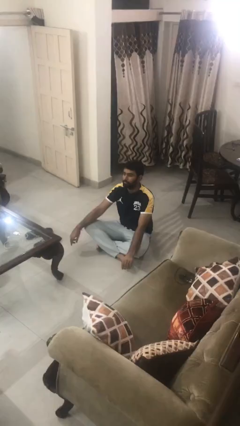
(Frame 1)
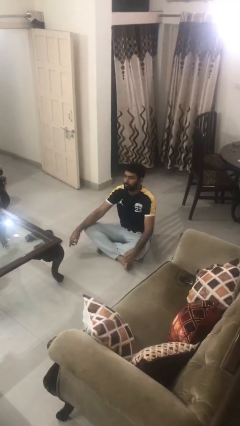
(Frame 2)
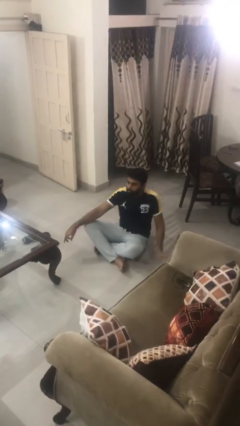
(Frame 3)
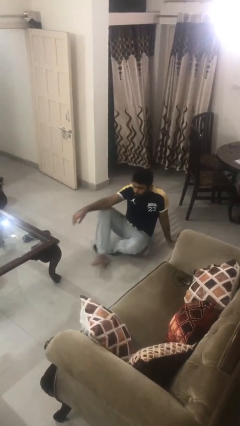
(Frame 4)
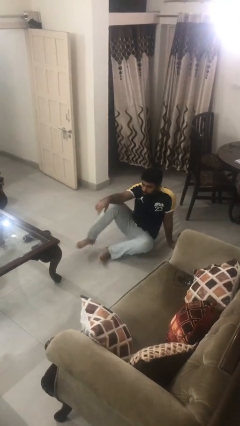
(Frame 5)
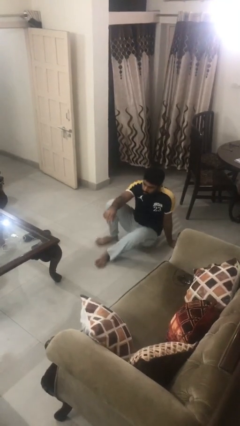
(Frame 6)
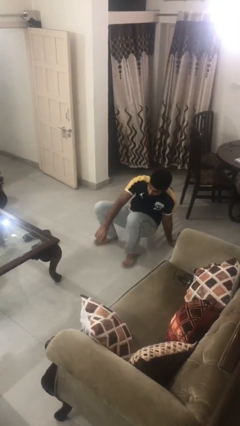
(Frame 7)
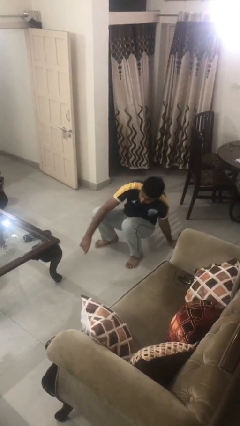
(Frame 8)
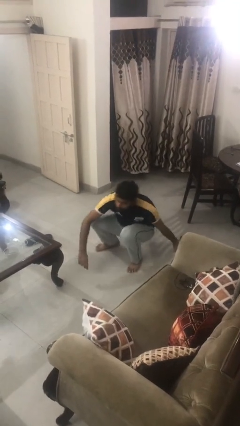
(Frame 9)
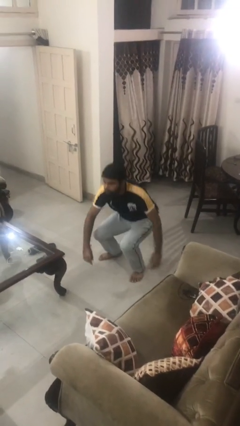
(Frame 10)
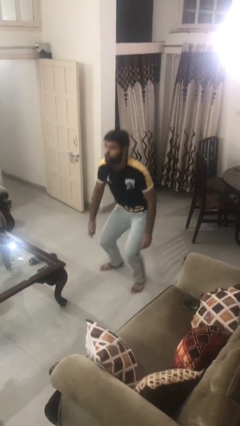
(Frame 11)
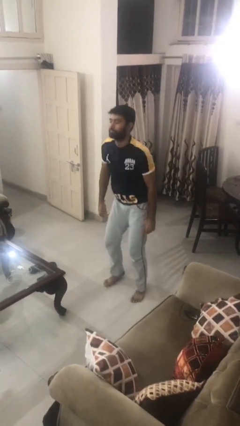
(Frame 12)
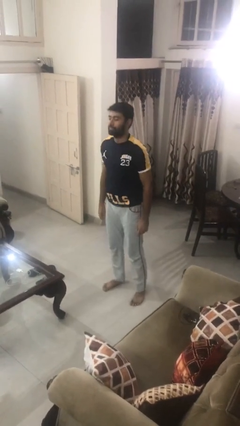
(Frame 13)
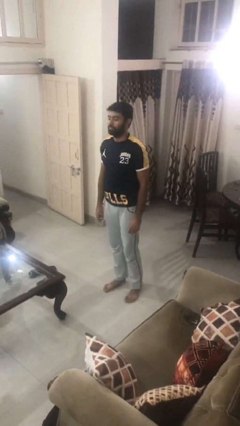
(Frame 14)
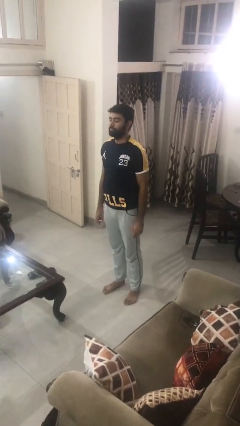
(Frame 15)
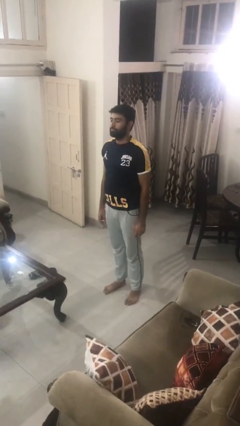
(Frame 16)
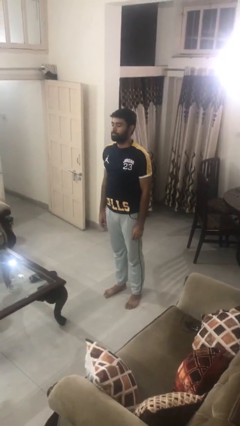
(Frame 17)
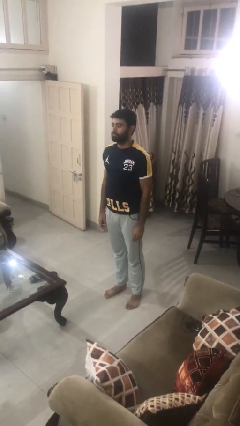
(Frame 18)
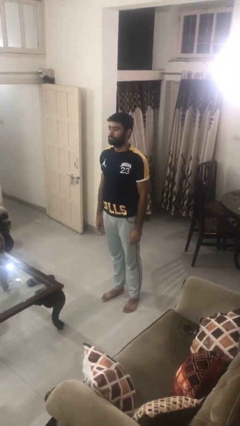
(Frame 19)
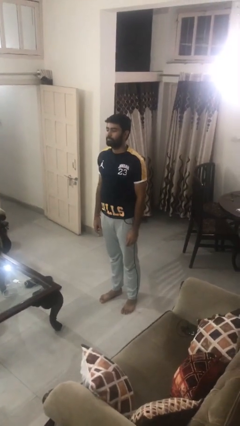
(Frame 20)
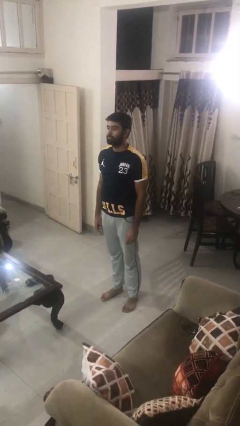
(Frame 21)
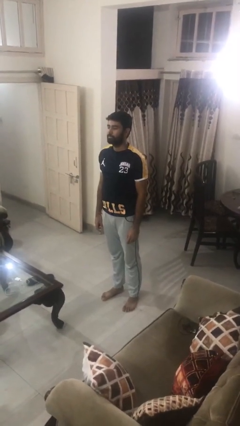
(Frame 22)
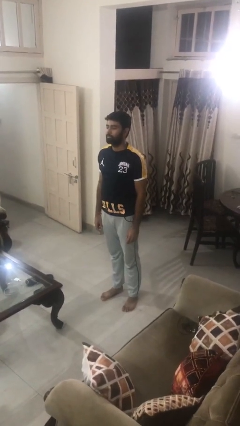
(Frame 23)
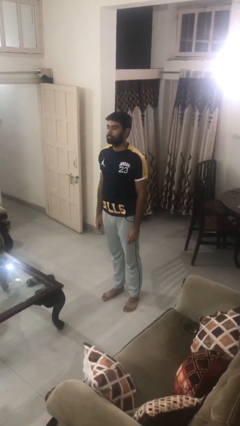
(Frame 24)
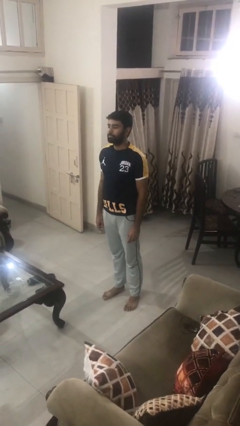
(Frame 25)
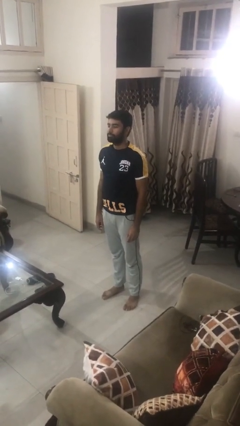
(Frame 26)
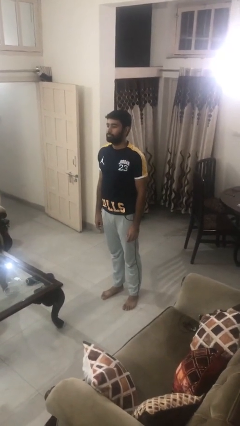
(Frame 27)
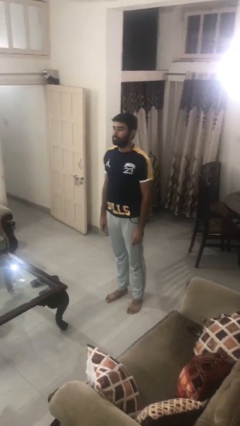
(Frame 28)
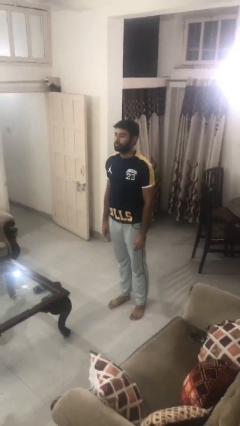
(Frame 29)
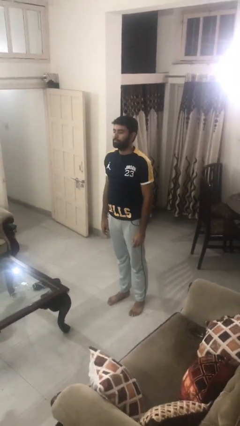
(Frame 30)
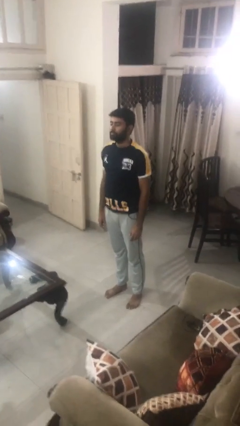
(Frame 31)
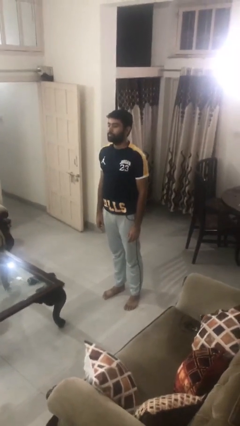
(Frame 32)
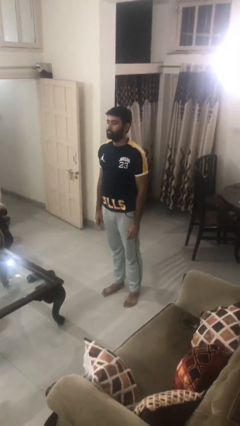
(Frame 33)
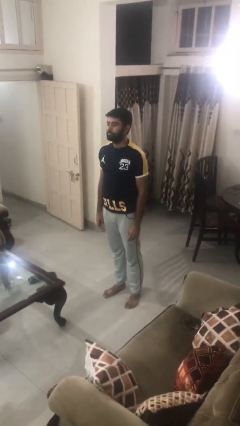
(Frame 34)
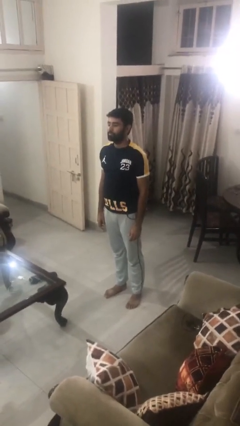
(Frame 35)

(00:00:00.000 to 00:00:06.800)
person stands up from floor

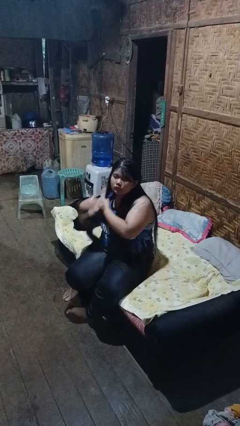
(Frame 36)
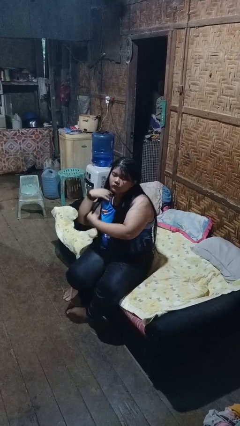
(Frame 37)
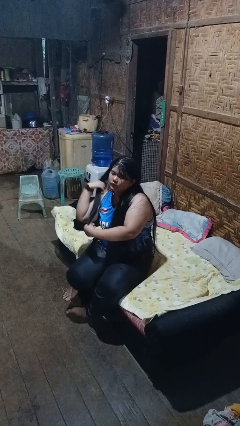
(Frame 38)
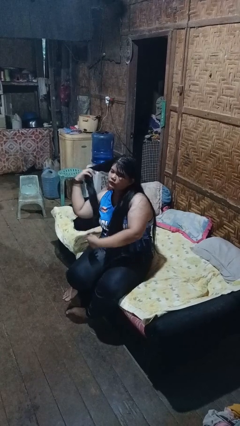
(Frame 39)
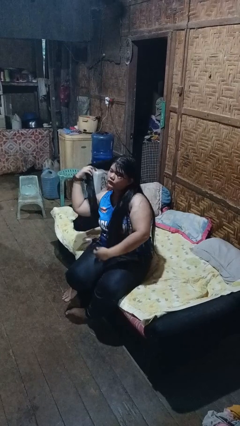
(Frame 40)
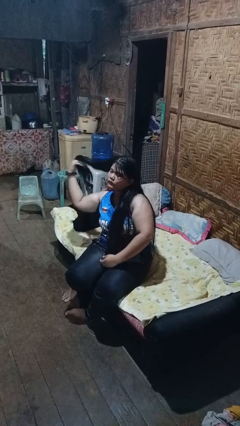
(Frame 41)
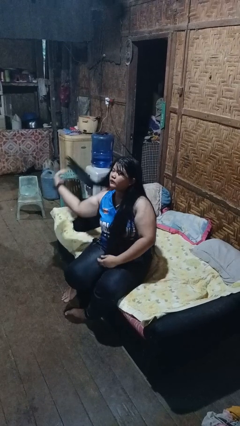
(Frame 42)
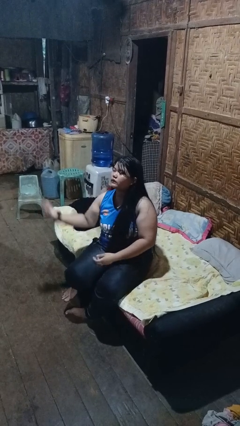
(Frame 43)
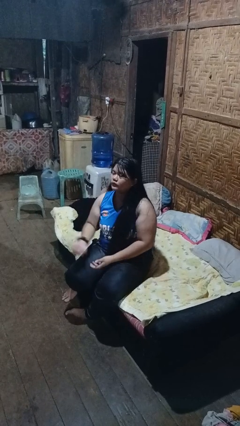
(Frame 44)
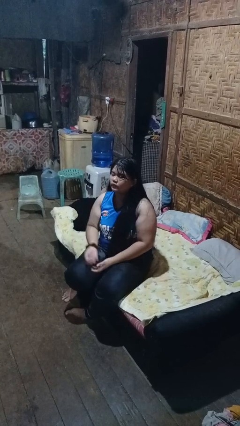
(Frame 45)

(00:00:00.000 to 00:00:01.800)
person strokes hair

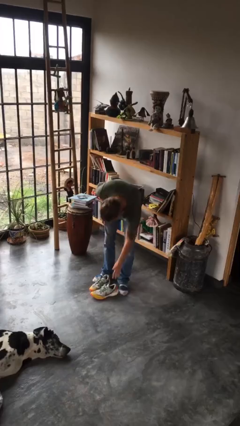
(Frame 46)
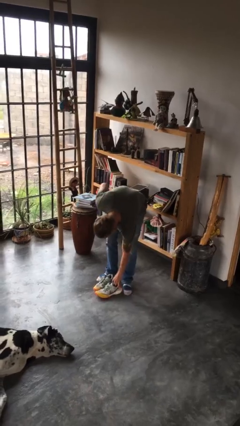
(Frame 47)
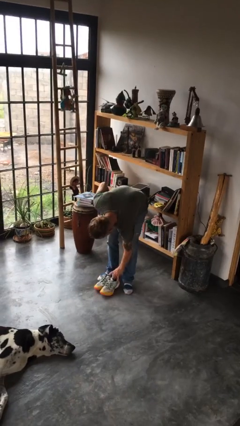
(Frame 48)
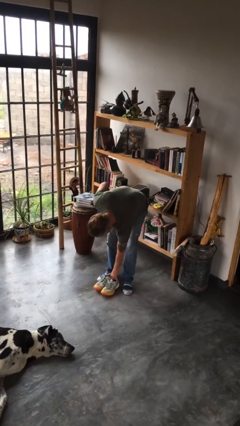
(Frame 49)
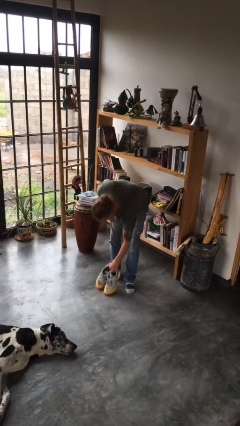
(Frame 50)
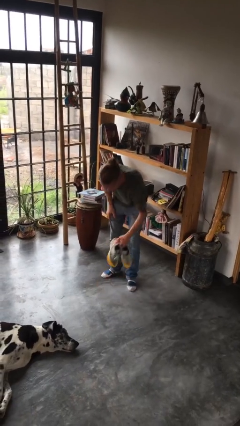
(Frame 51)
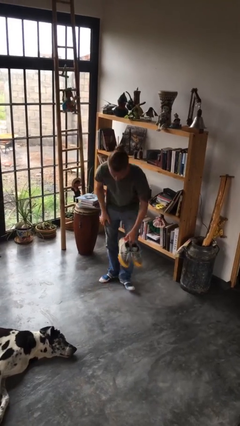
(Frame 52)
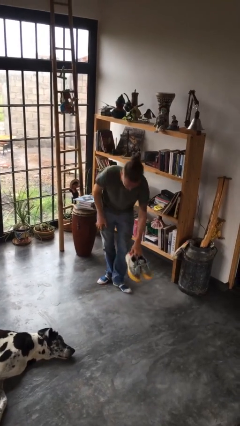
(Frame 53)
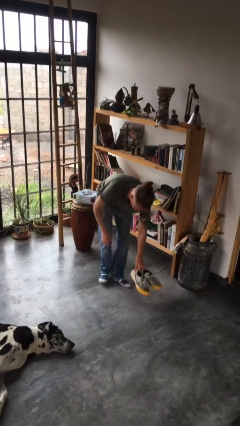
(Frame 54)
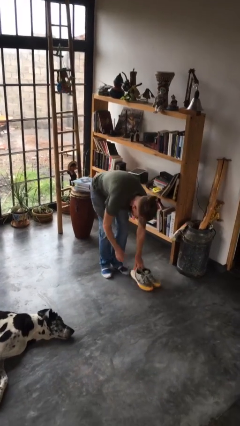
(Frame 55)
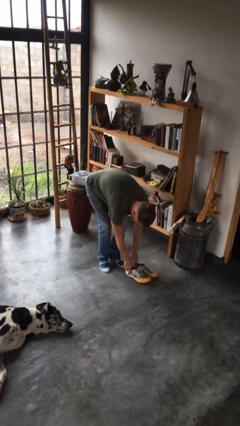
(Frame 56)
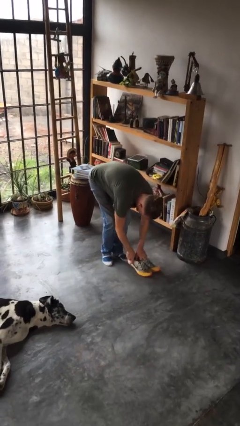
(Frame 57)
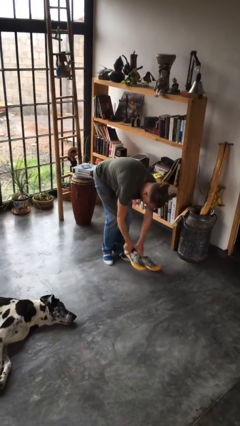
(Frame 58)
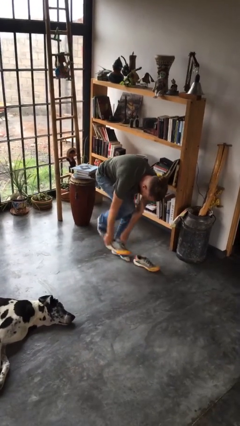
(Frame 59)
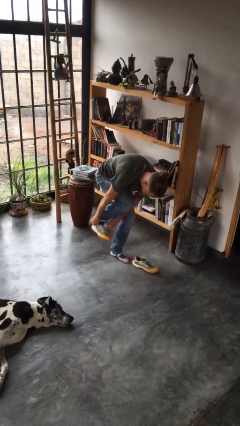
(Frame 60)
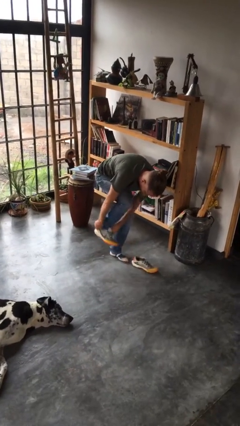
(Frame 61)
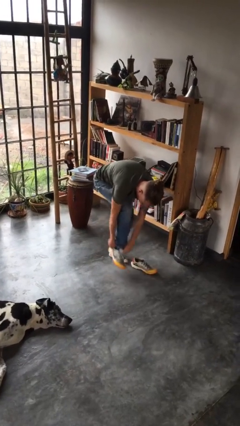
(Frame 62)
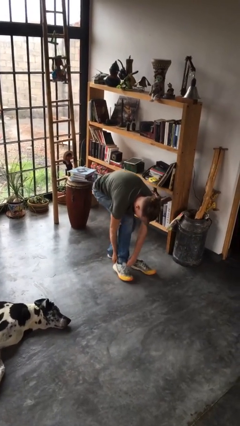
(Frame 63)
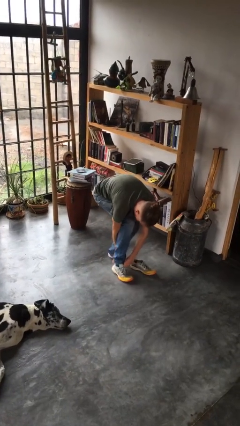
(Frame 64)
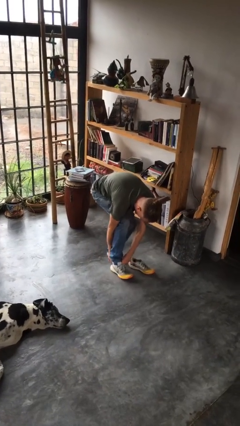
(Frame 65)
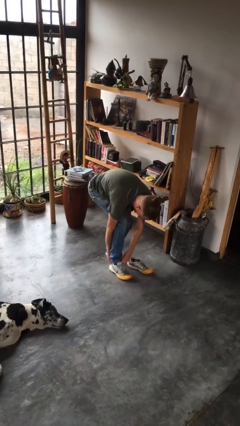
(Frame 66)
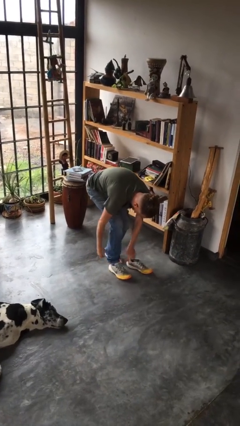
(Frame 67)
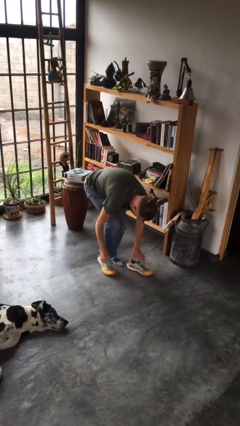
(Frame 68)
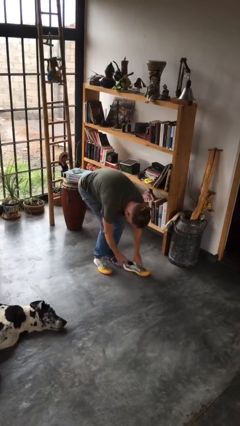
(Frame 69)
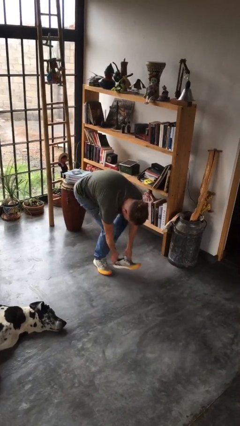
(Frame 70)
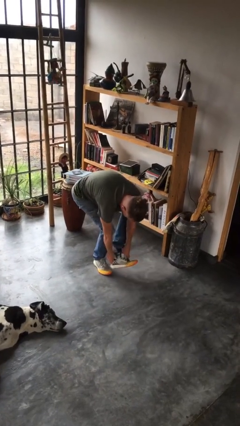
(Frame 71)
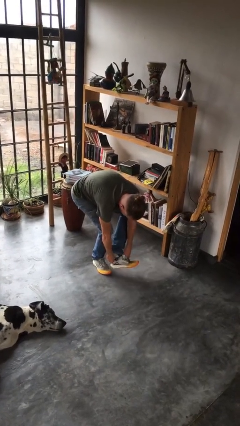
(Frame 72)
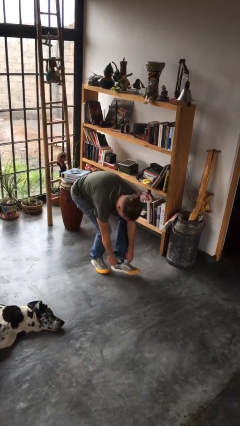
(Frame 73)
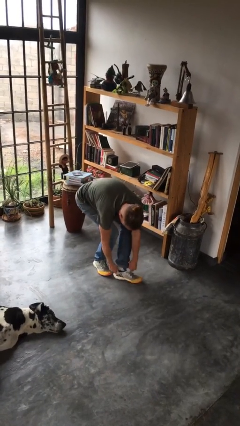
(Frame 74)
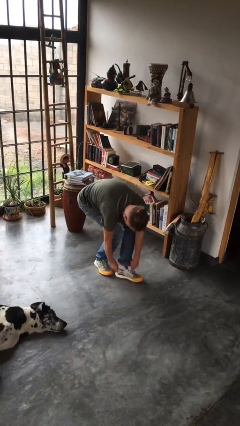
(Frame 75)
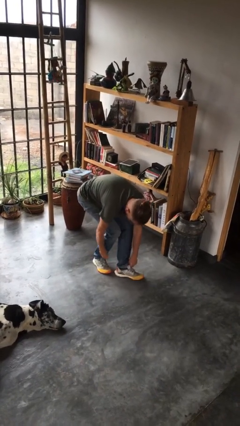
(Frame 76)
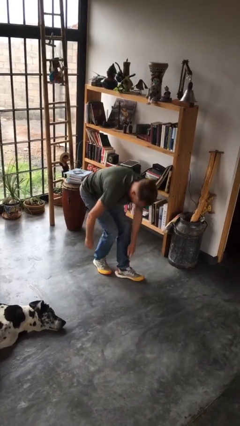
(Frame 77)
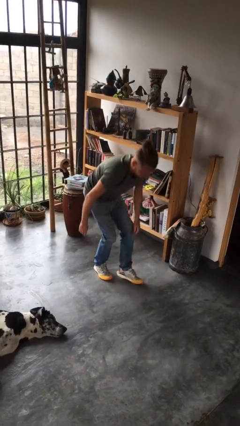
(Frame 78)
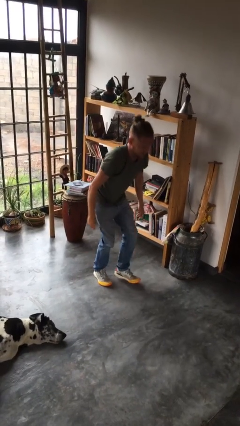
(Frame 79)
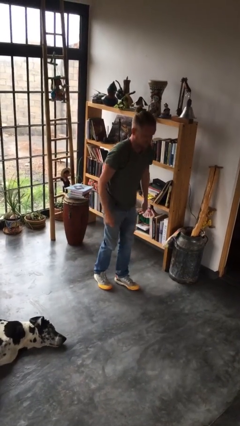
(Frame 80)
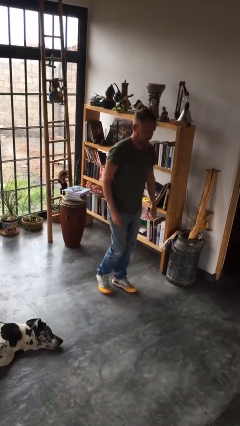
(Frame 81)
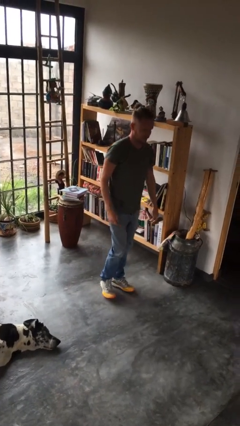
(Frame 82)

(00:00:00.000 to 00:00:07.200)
person puts on shoes

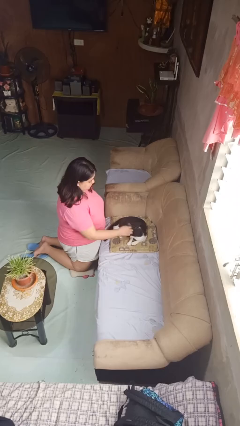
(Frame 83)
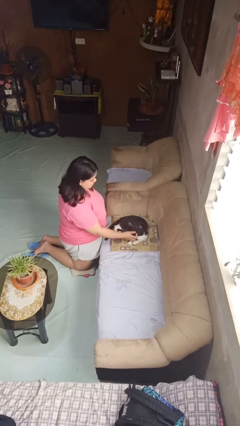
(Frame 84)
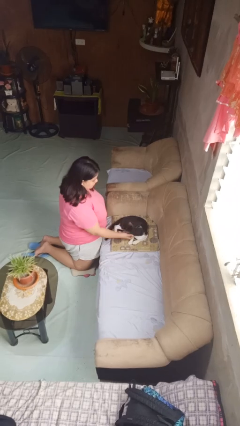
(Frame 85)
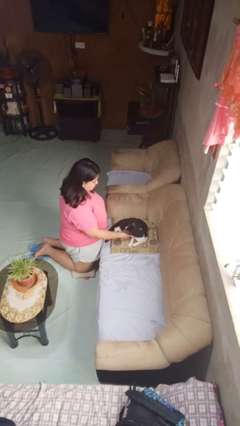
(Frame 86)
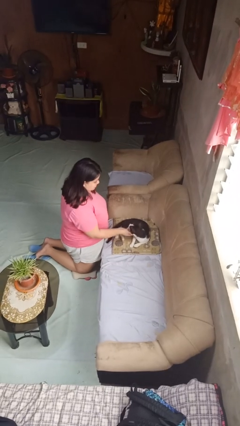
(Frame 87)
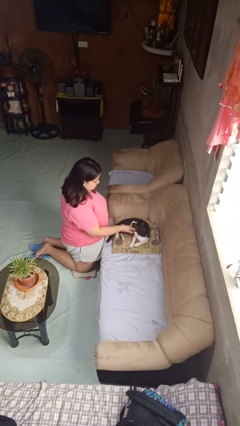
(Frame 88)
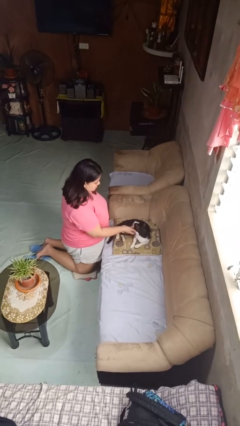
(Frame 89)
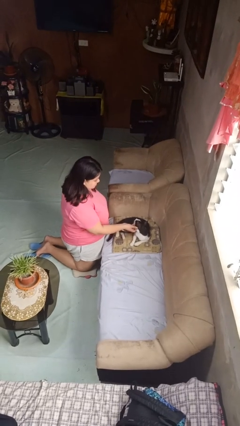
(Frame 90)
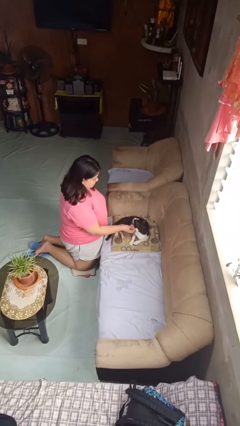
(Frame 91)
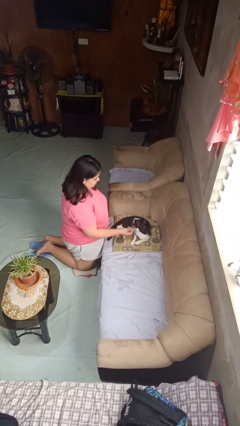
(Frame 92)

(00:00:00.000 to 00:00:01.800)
person pets cat
